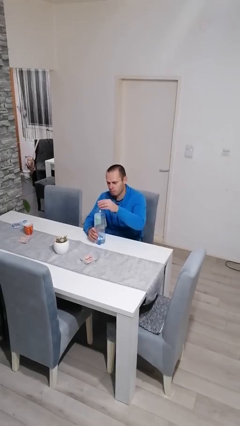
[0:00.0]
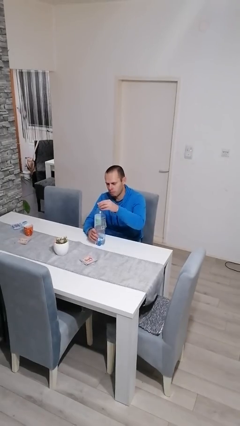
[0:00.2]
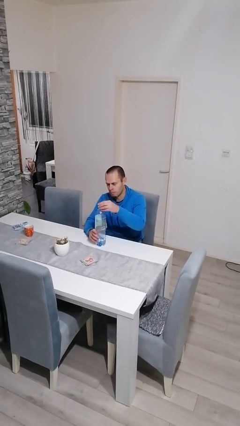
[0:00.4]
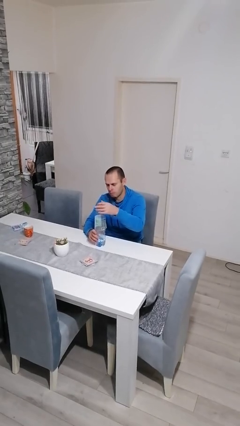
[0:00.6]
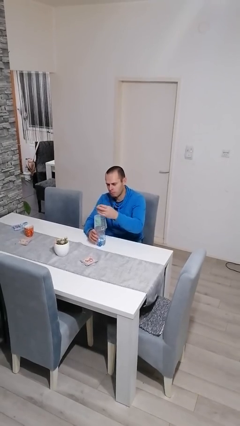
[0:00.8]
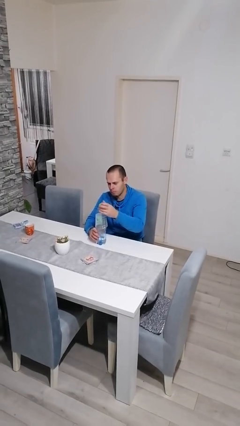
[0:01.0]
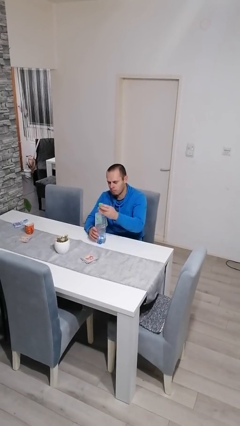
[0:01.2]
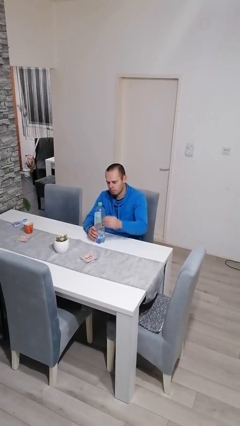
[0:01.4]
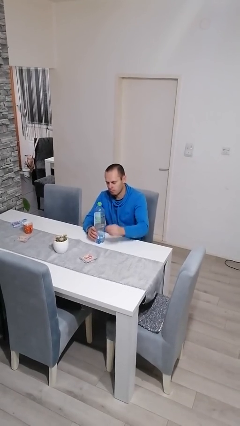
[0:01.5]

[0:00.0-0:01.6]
person screws lid to bottle

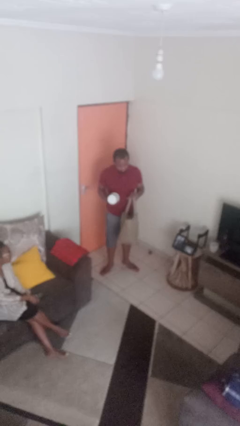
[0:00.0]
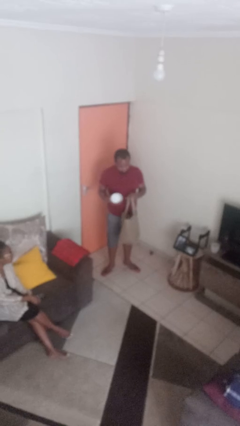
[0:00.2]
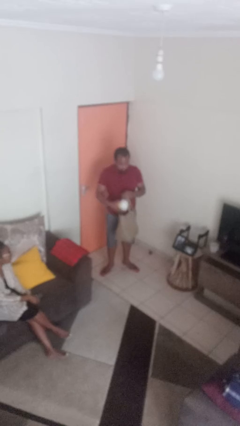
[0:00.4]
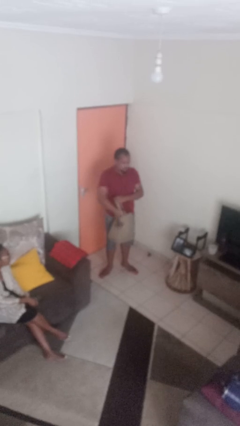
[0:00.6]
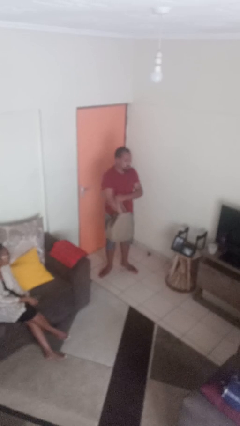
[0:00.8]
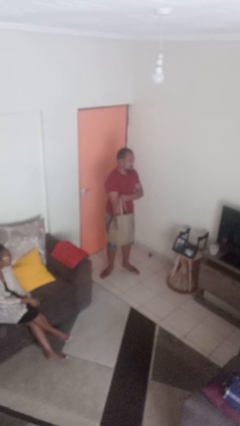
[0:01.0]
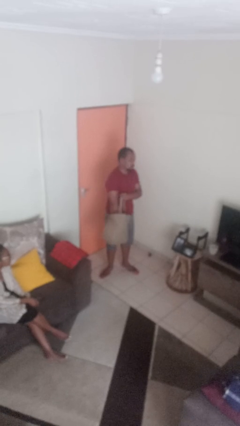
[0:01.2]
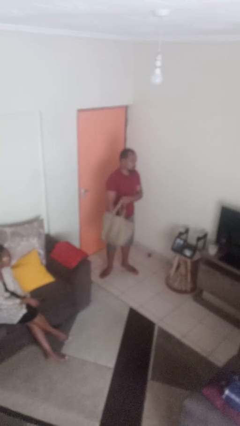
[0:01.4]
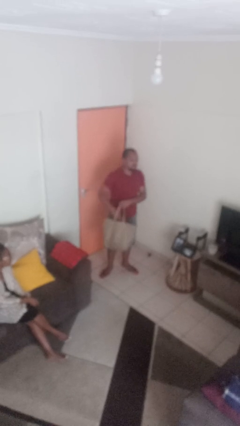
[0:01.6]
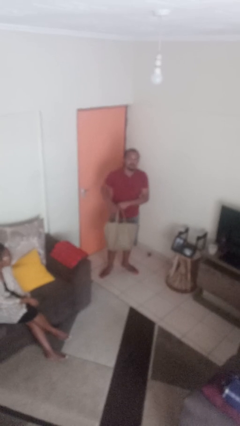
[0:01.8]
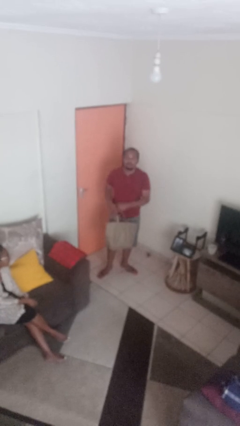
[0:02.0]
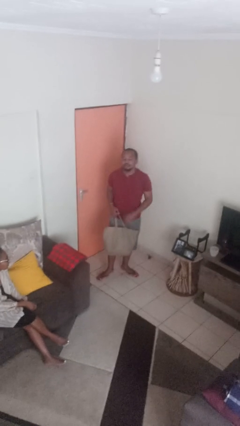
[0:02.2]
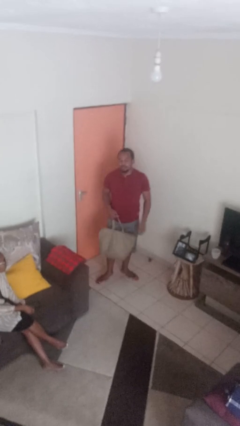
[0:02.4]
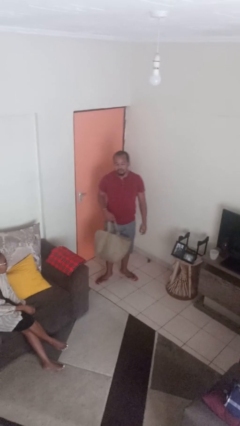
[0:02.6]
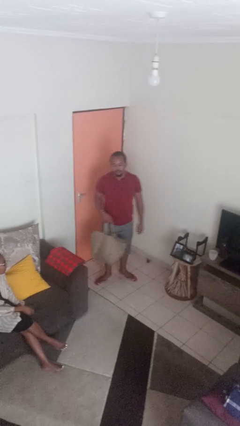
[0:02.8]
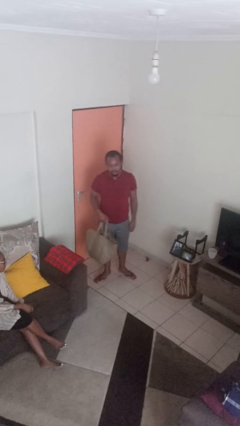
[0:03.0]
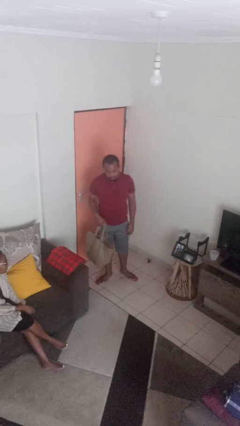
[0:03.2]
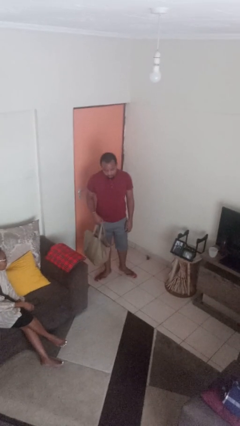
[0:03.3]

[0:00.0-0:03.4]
person puts object into bag

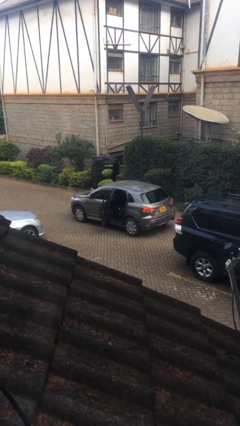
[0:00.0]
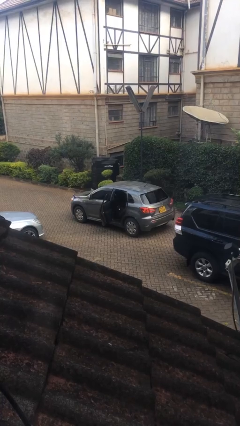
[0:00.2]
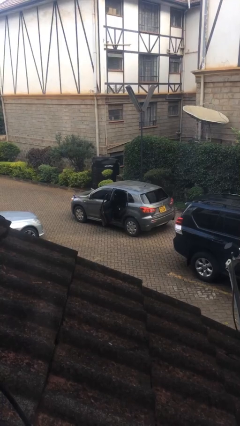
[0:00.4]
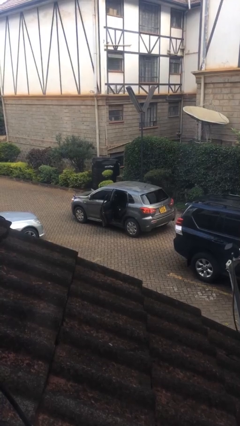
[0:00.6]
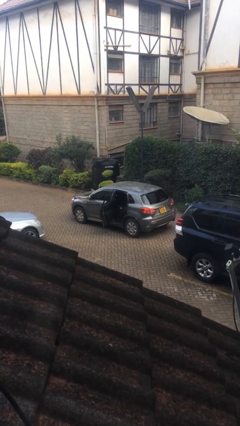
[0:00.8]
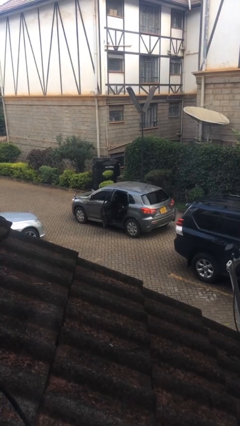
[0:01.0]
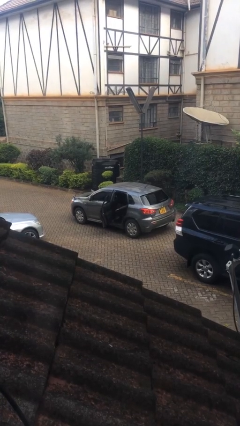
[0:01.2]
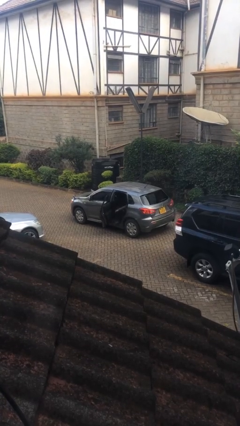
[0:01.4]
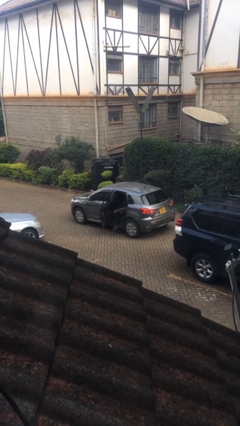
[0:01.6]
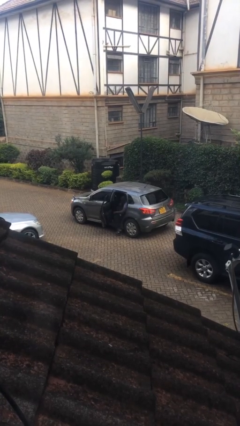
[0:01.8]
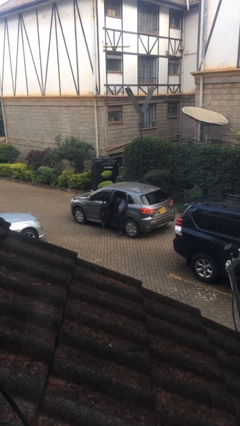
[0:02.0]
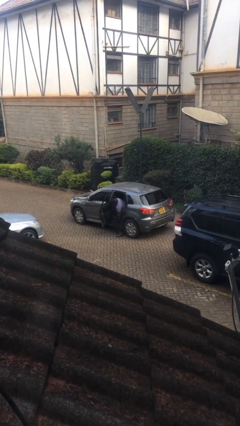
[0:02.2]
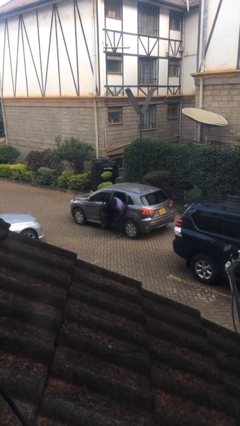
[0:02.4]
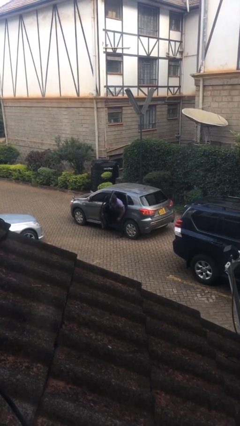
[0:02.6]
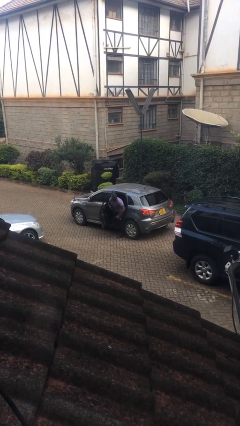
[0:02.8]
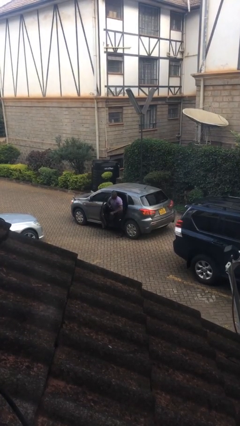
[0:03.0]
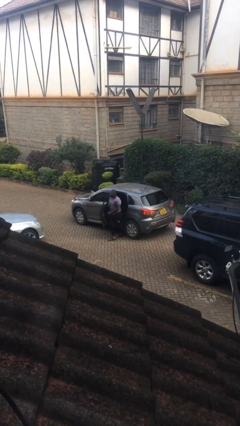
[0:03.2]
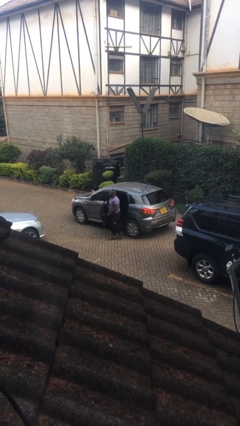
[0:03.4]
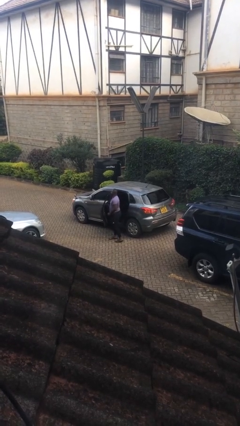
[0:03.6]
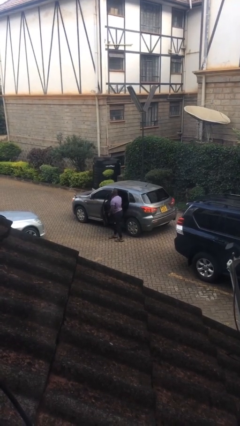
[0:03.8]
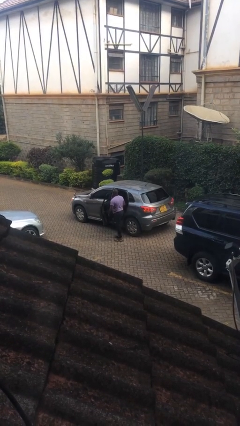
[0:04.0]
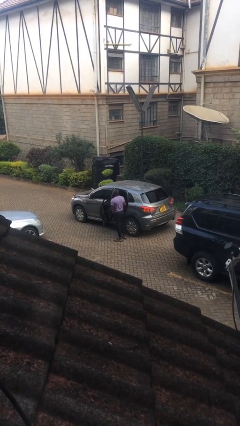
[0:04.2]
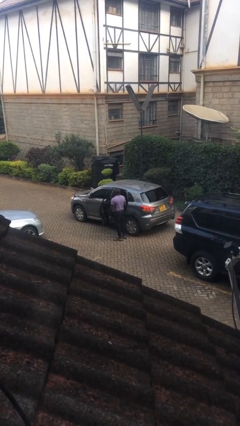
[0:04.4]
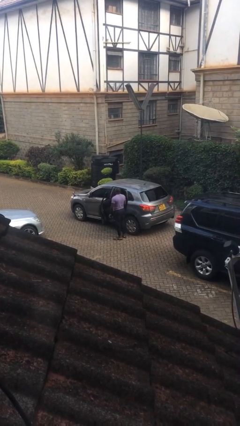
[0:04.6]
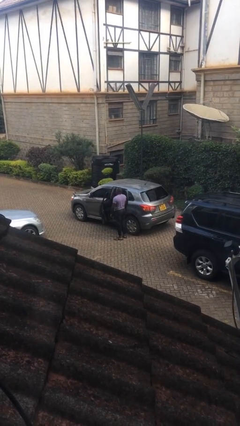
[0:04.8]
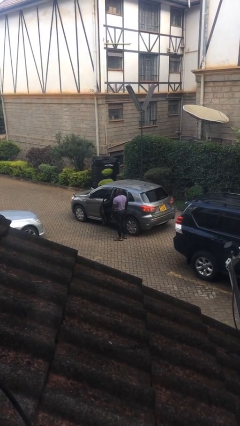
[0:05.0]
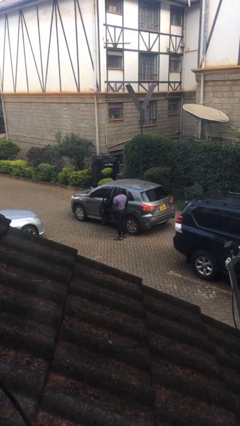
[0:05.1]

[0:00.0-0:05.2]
person exits car

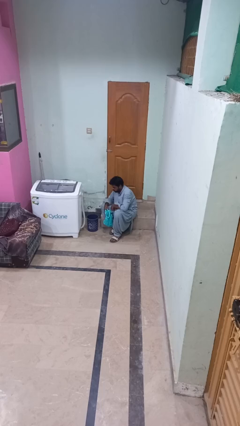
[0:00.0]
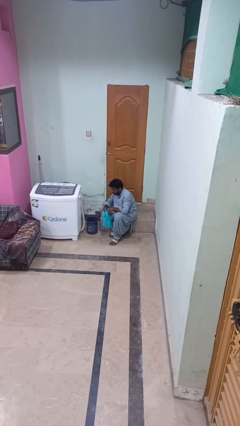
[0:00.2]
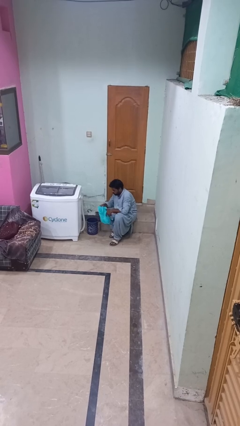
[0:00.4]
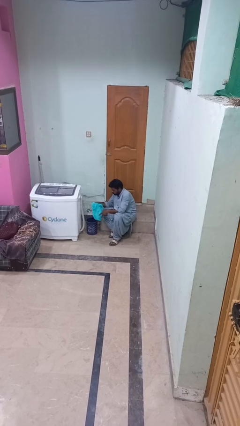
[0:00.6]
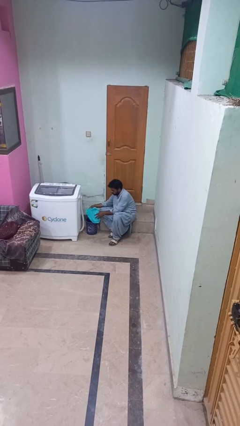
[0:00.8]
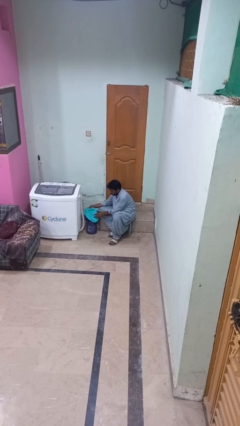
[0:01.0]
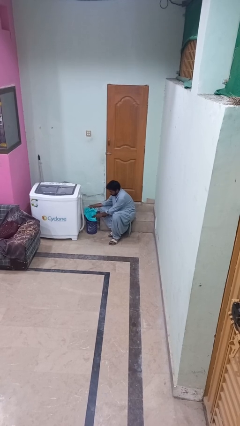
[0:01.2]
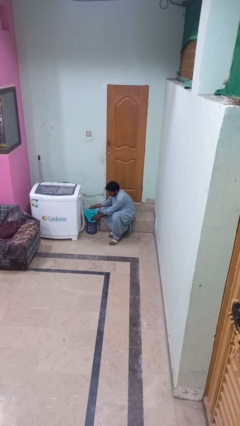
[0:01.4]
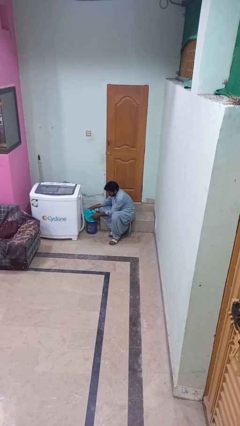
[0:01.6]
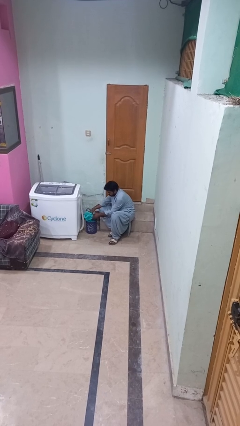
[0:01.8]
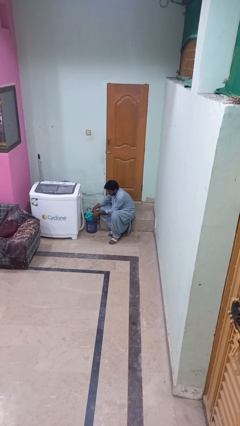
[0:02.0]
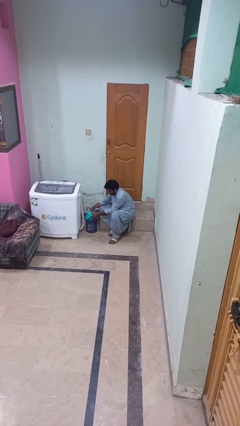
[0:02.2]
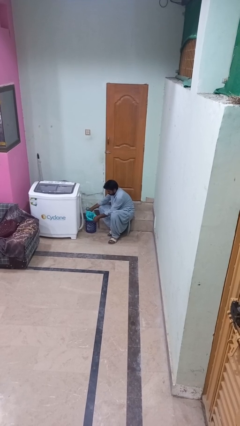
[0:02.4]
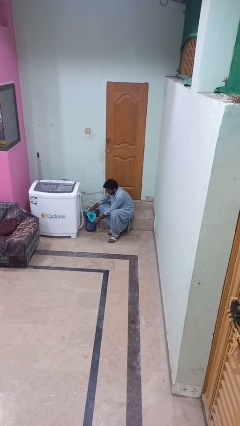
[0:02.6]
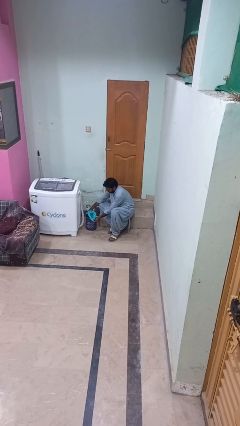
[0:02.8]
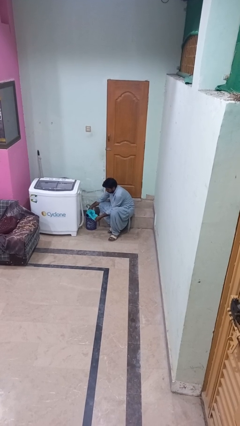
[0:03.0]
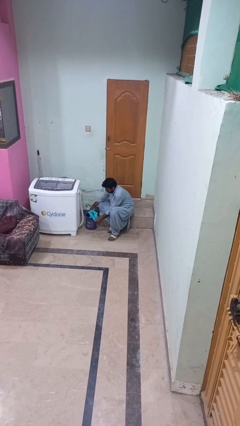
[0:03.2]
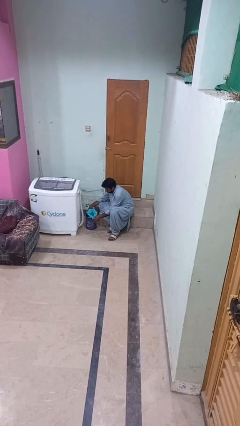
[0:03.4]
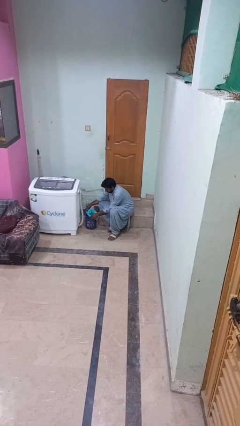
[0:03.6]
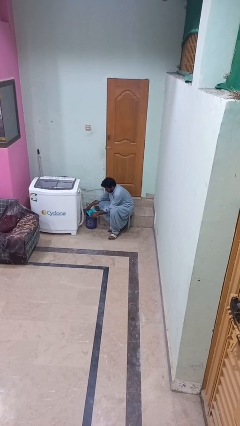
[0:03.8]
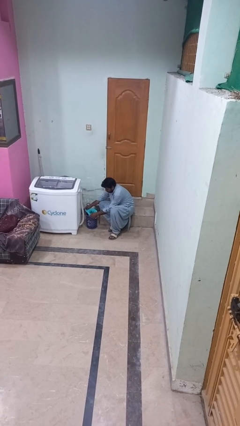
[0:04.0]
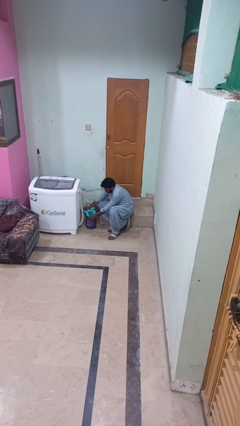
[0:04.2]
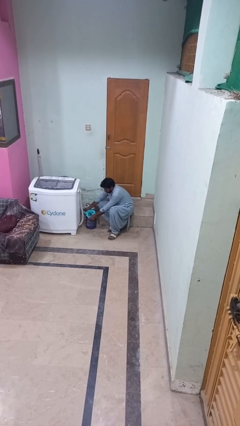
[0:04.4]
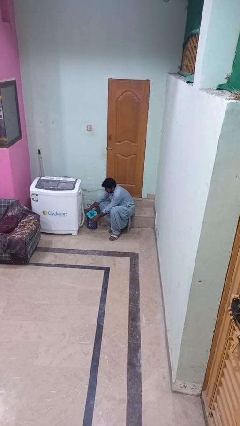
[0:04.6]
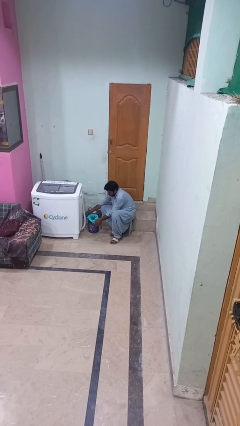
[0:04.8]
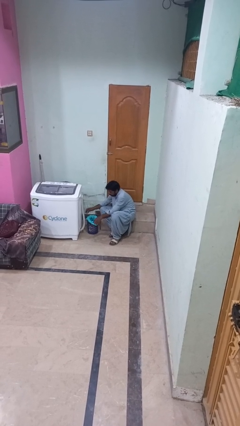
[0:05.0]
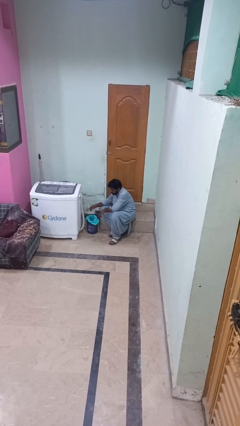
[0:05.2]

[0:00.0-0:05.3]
person inserts trashbag into trashcan

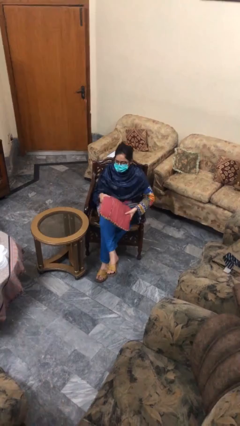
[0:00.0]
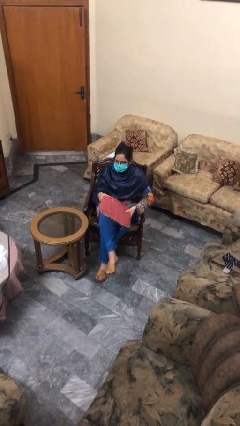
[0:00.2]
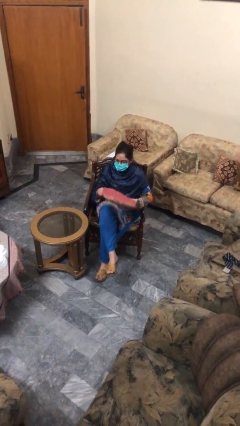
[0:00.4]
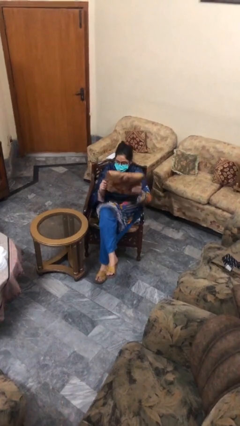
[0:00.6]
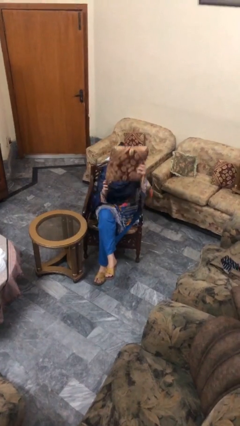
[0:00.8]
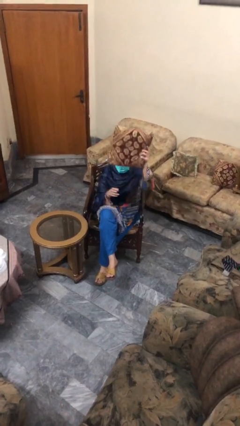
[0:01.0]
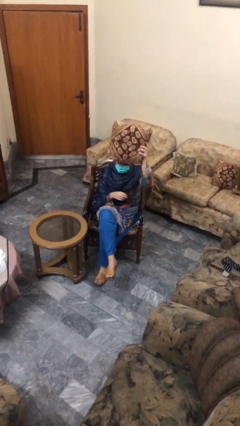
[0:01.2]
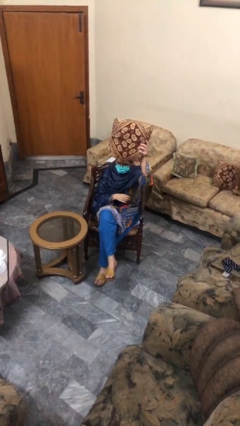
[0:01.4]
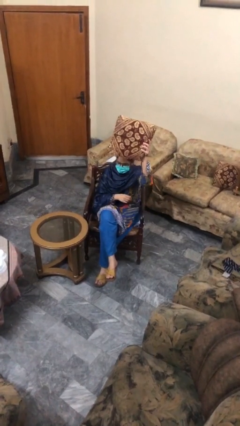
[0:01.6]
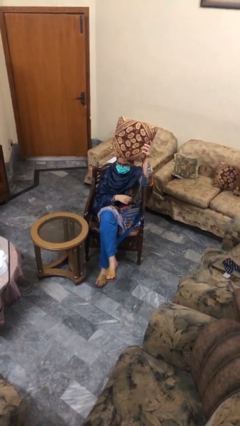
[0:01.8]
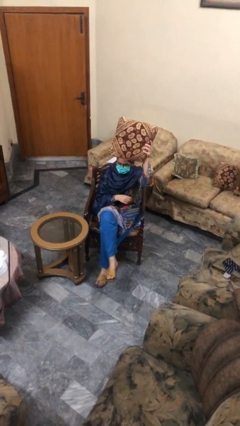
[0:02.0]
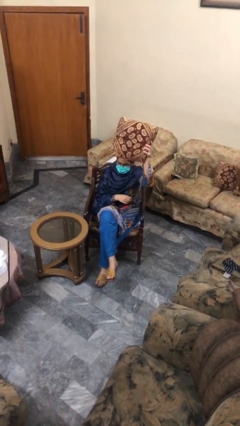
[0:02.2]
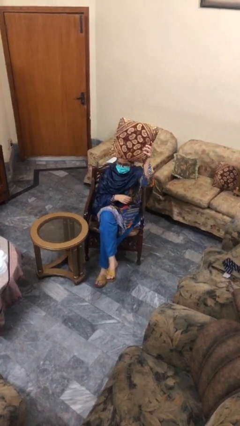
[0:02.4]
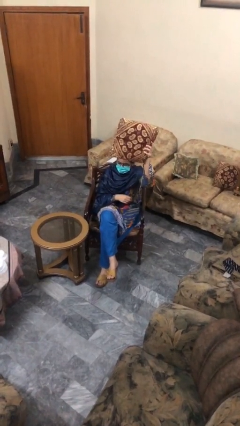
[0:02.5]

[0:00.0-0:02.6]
person holds object above head
